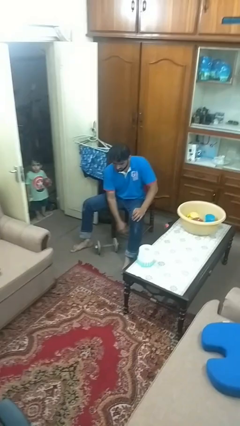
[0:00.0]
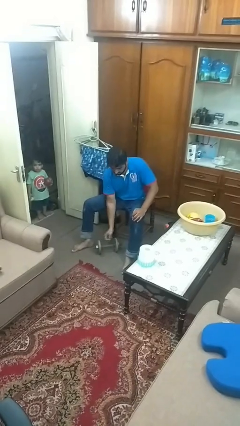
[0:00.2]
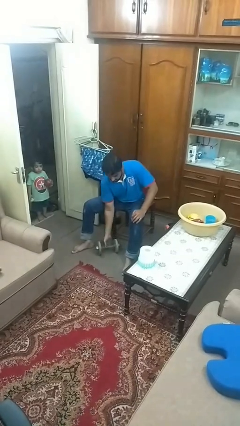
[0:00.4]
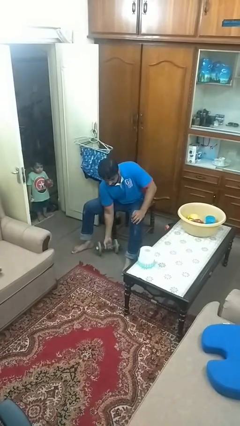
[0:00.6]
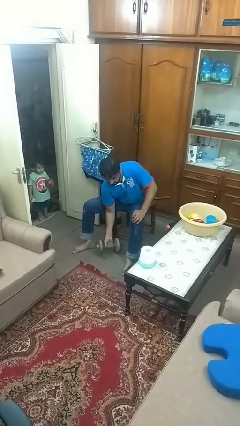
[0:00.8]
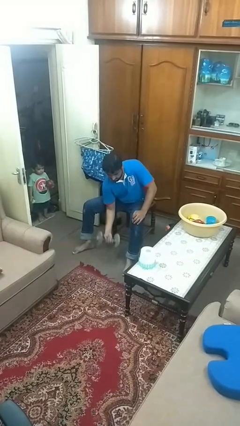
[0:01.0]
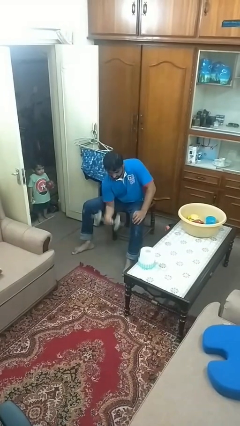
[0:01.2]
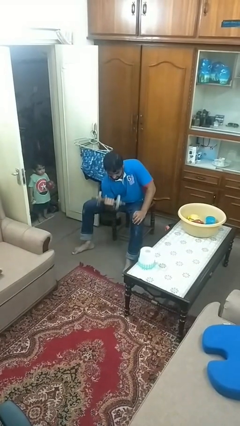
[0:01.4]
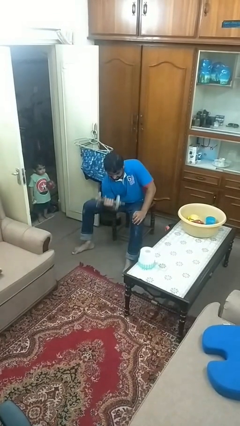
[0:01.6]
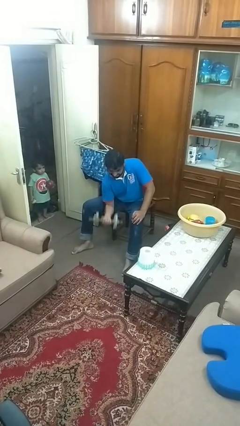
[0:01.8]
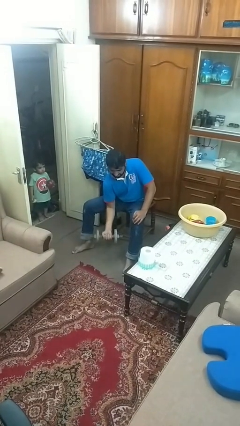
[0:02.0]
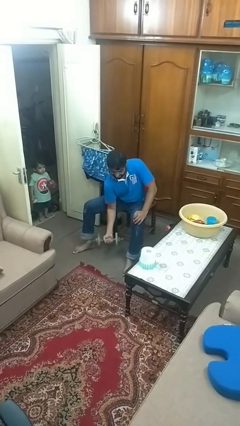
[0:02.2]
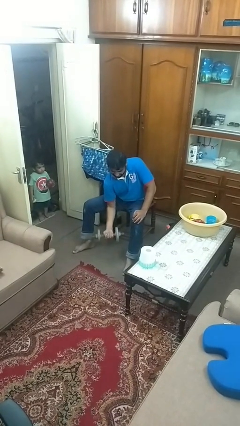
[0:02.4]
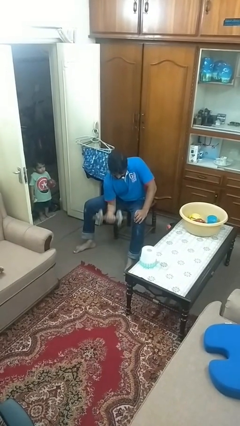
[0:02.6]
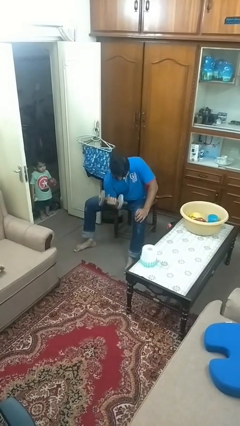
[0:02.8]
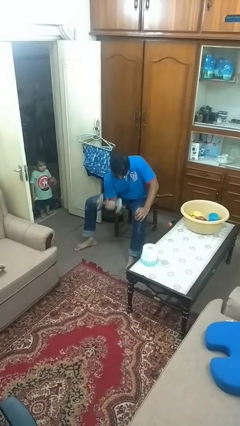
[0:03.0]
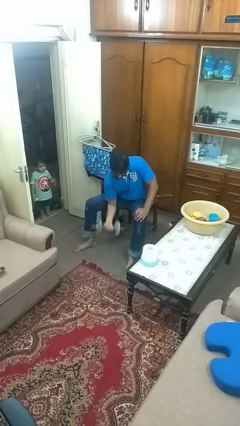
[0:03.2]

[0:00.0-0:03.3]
person lifts dumbbells

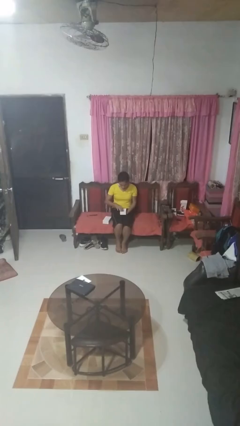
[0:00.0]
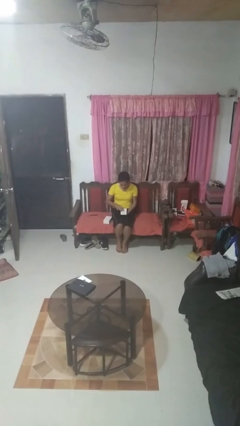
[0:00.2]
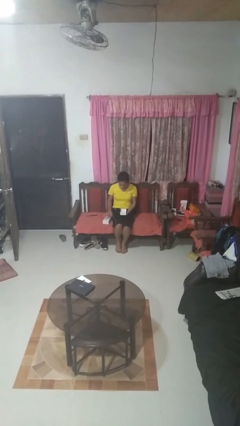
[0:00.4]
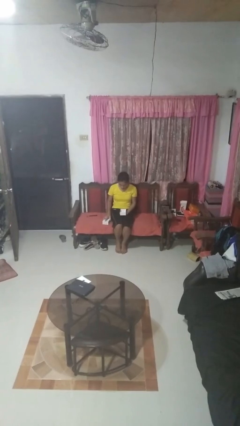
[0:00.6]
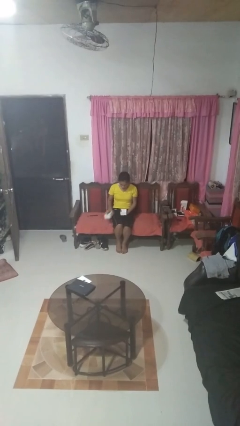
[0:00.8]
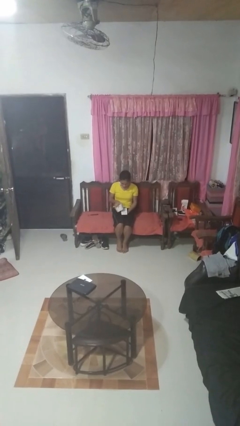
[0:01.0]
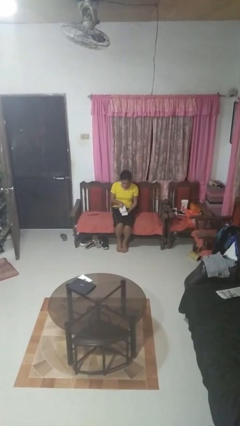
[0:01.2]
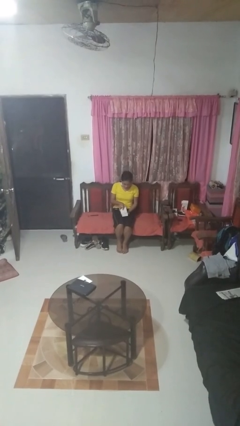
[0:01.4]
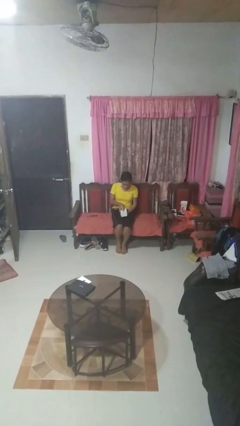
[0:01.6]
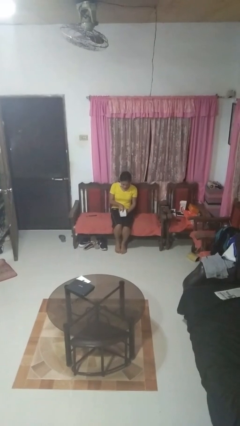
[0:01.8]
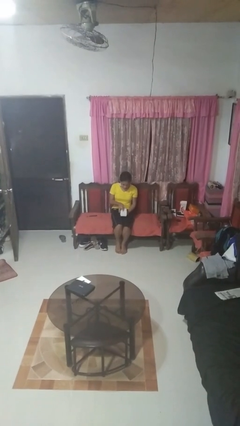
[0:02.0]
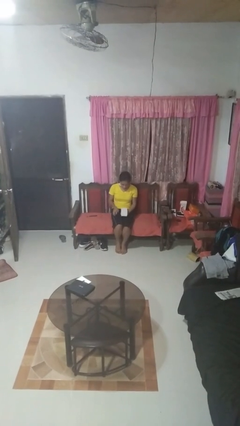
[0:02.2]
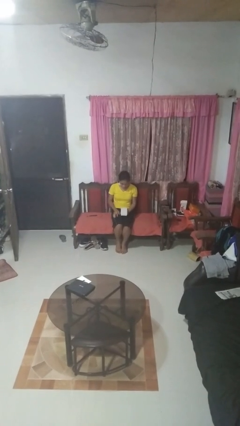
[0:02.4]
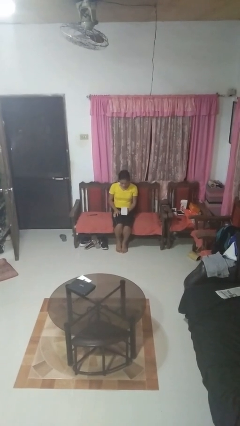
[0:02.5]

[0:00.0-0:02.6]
person closes jewelry box

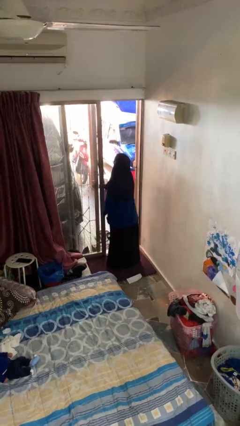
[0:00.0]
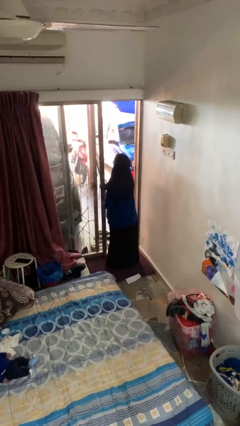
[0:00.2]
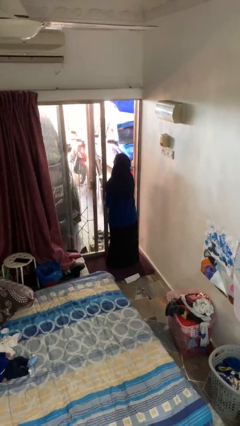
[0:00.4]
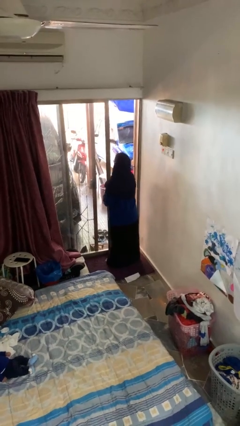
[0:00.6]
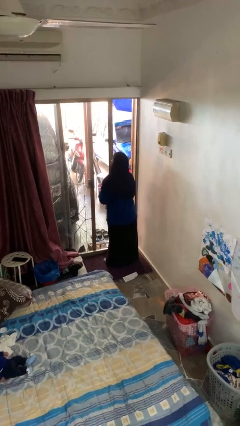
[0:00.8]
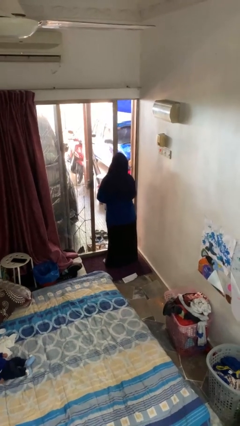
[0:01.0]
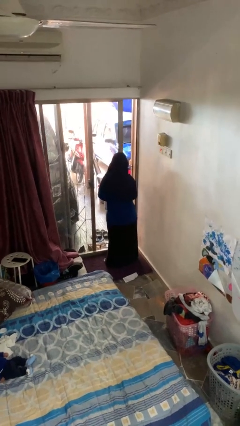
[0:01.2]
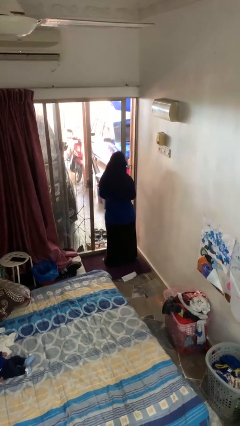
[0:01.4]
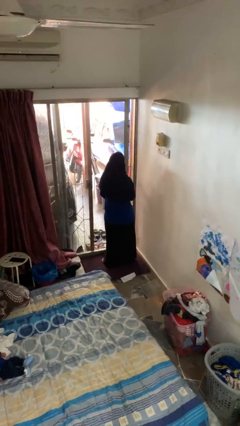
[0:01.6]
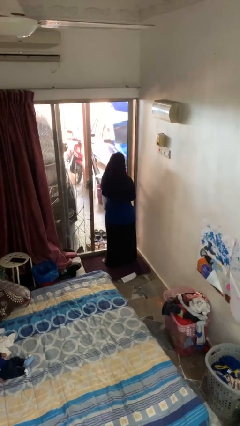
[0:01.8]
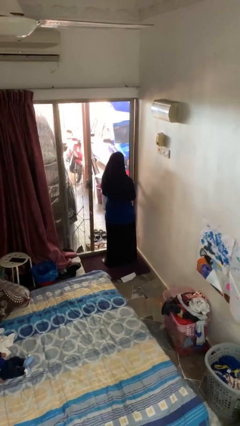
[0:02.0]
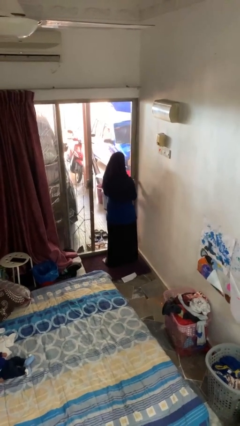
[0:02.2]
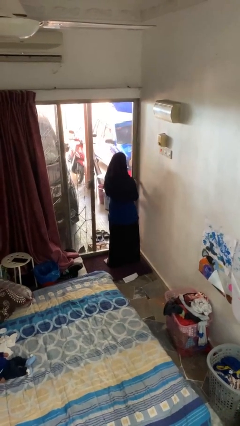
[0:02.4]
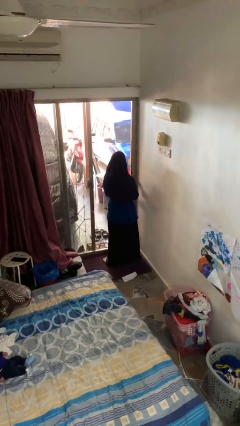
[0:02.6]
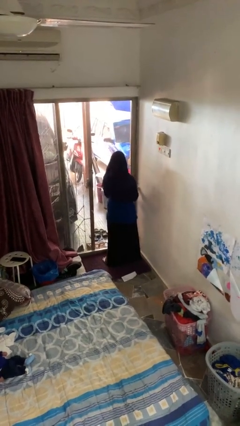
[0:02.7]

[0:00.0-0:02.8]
person closes sliding door

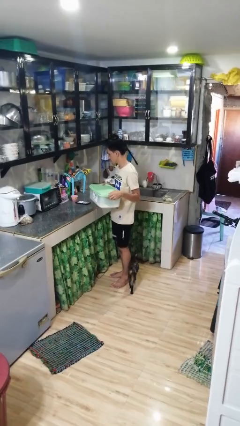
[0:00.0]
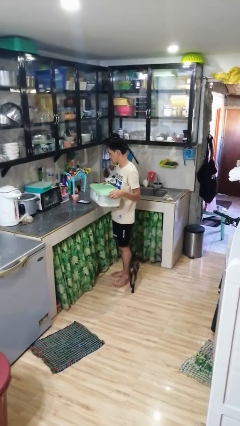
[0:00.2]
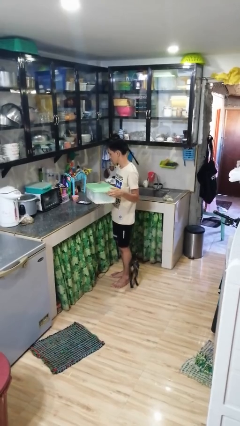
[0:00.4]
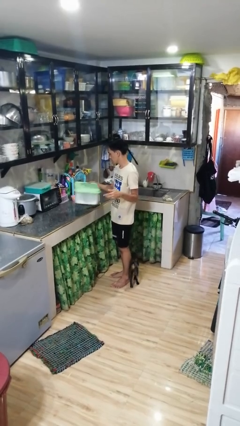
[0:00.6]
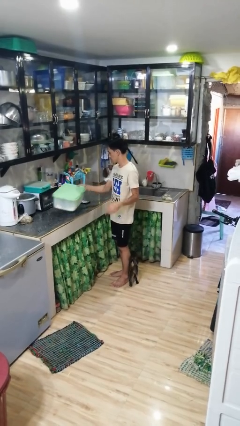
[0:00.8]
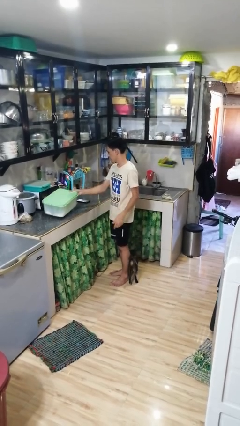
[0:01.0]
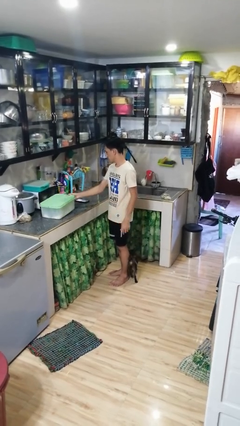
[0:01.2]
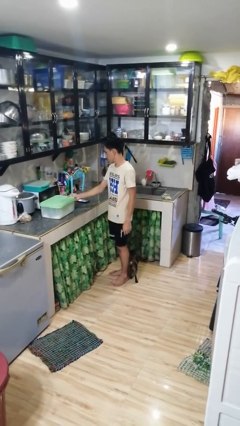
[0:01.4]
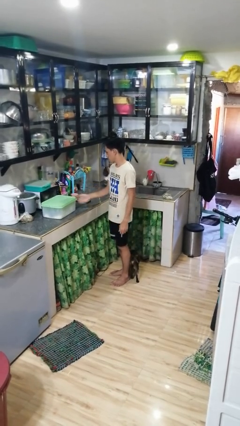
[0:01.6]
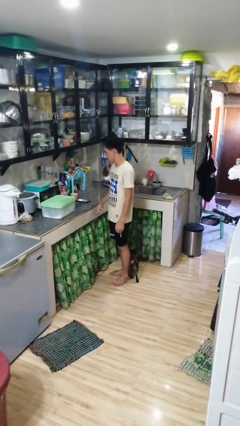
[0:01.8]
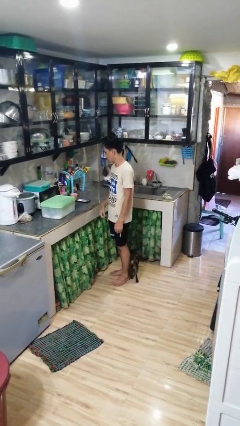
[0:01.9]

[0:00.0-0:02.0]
person puts down object on countertop

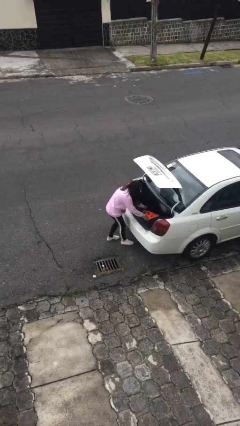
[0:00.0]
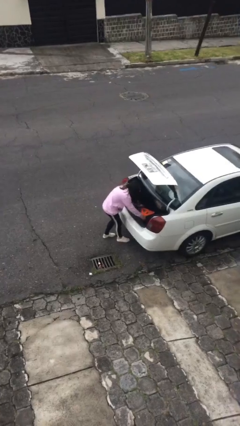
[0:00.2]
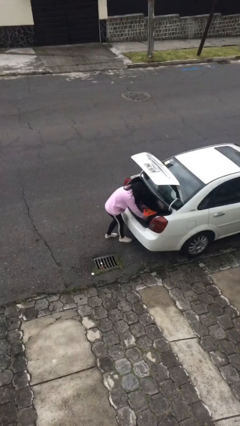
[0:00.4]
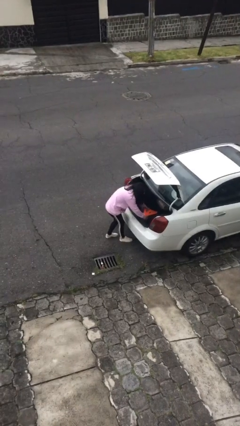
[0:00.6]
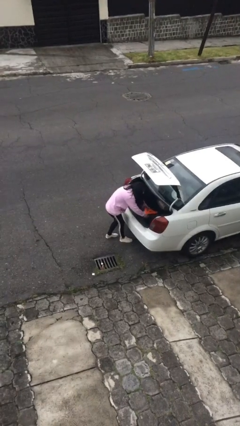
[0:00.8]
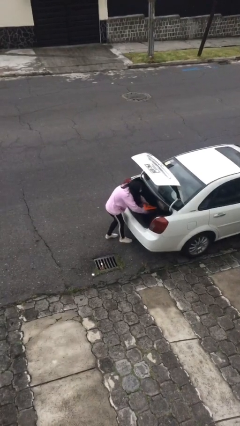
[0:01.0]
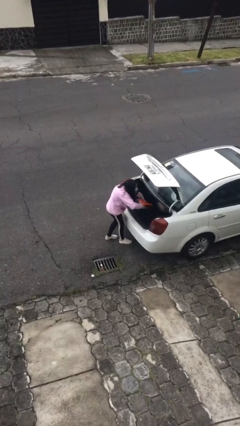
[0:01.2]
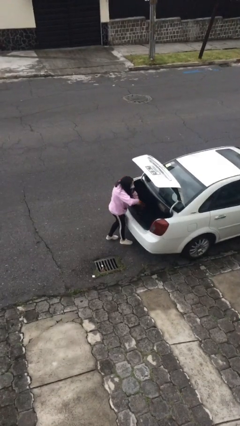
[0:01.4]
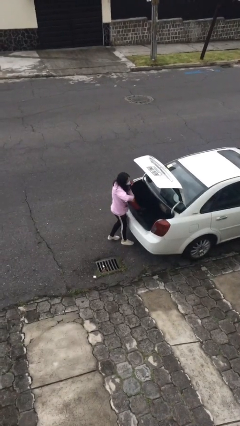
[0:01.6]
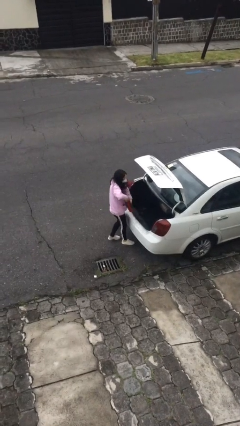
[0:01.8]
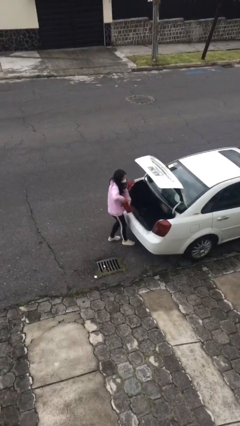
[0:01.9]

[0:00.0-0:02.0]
person unloads car

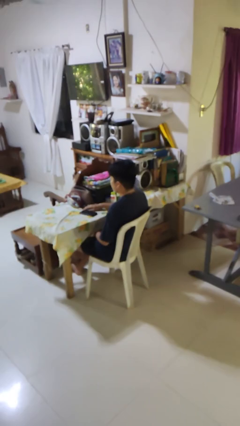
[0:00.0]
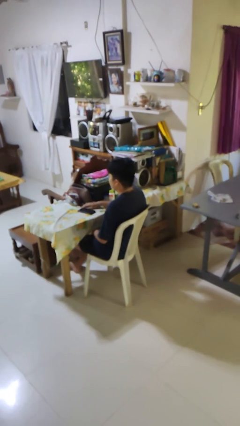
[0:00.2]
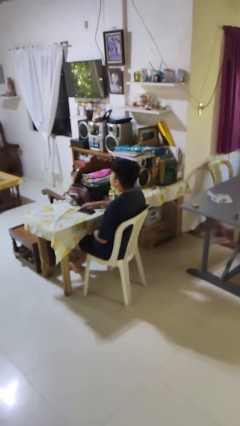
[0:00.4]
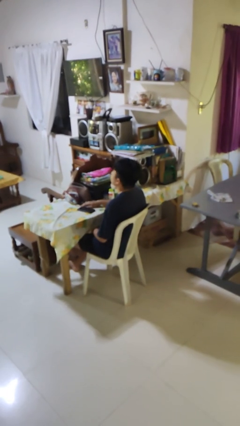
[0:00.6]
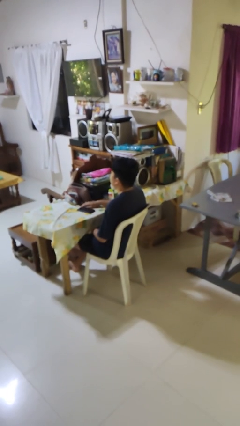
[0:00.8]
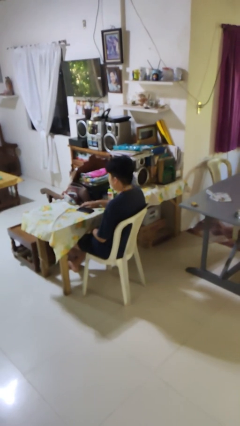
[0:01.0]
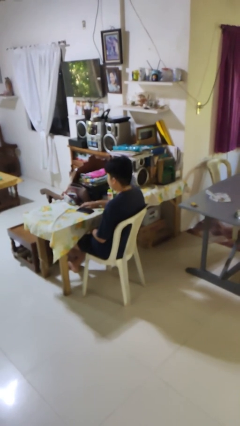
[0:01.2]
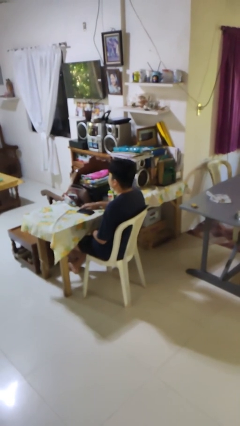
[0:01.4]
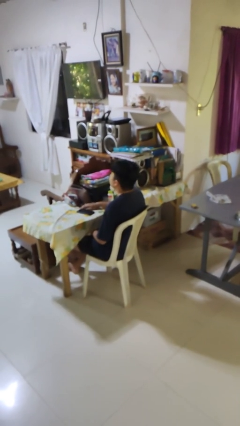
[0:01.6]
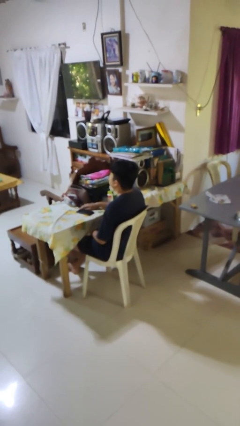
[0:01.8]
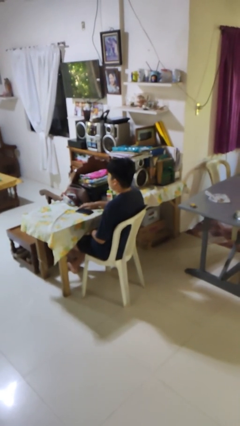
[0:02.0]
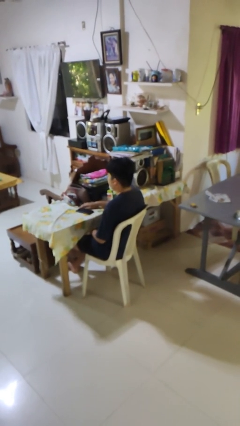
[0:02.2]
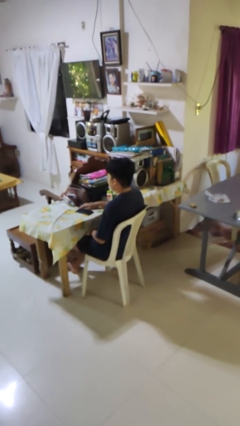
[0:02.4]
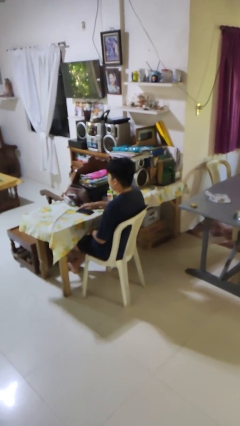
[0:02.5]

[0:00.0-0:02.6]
person nods head

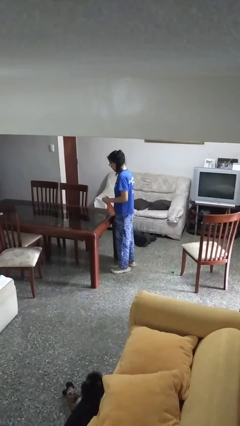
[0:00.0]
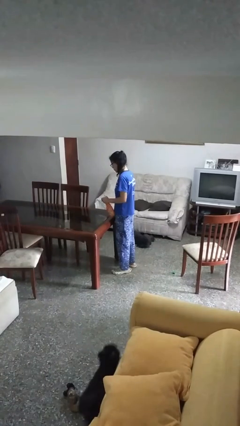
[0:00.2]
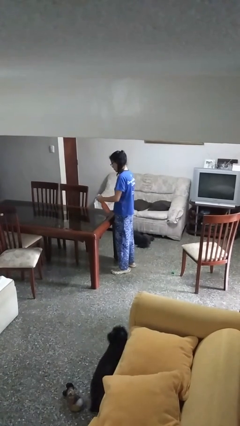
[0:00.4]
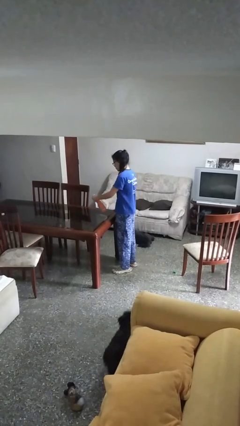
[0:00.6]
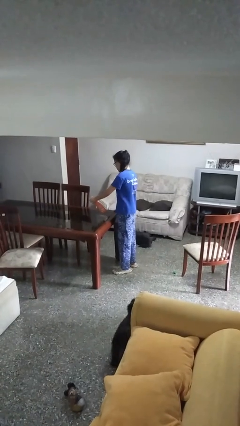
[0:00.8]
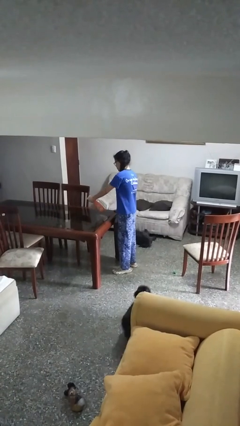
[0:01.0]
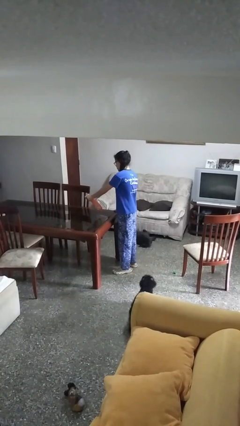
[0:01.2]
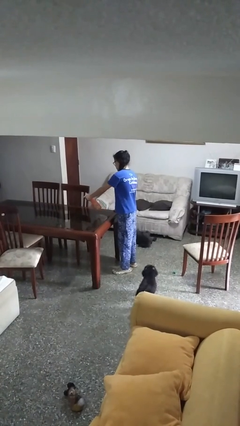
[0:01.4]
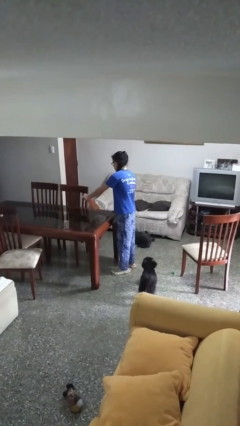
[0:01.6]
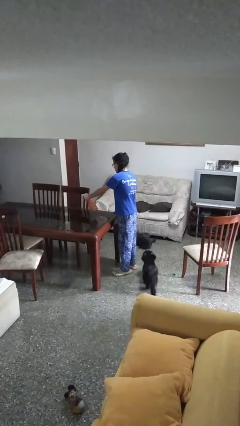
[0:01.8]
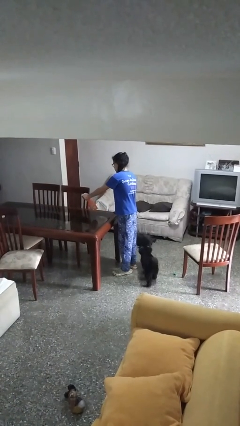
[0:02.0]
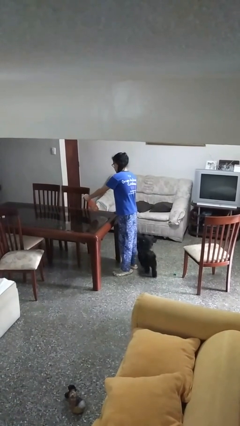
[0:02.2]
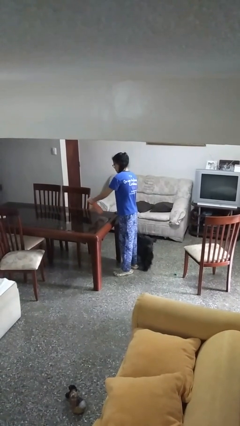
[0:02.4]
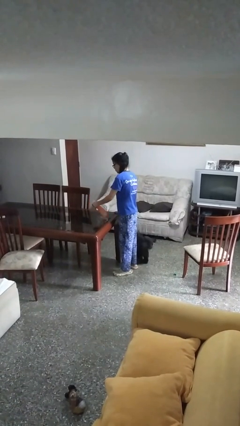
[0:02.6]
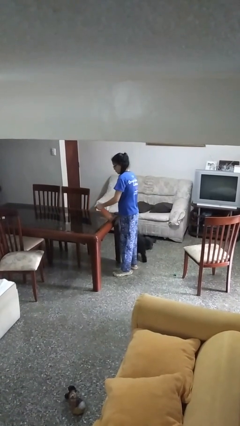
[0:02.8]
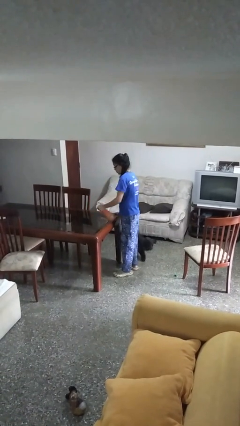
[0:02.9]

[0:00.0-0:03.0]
person sprays from bottle
